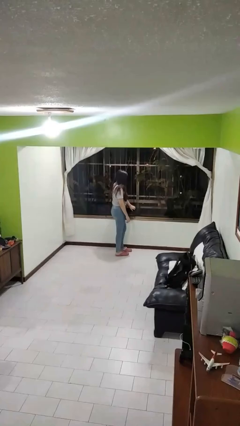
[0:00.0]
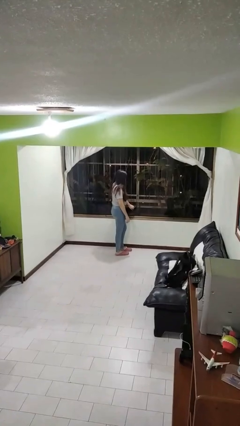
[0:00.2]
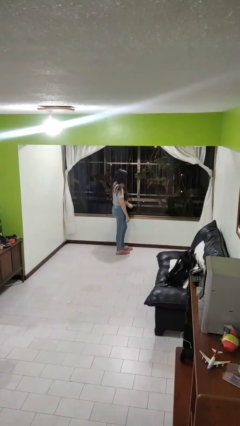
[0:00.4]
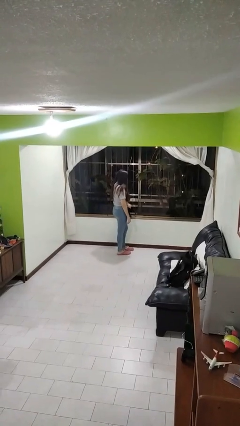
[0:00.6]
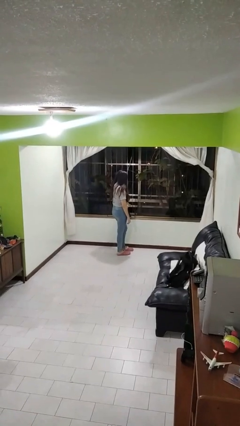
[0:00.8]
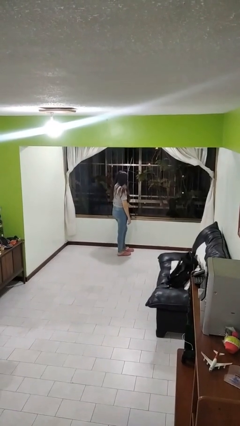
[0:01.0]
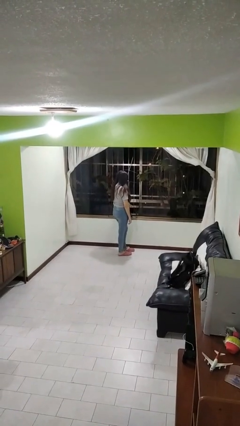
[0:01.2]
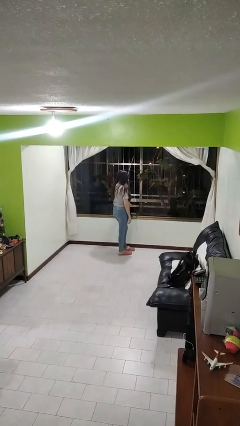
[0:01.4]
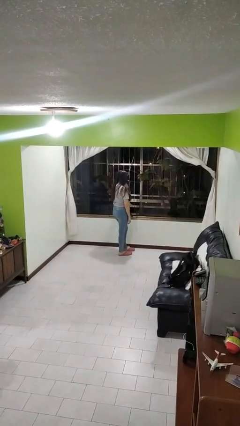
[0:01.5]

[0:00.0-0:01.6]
person opens home window

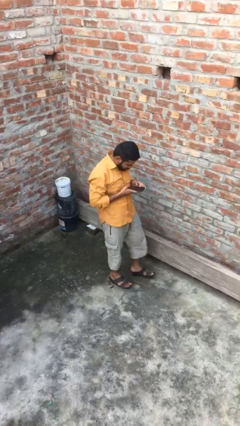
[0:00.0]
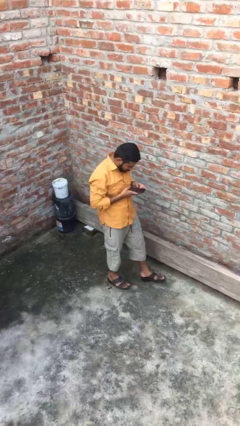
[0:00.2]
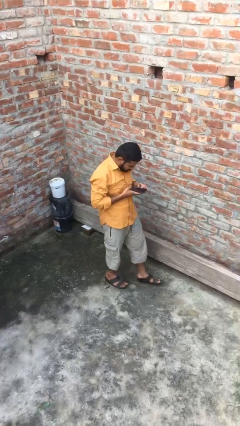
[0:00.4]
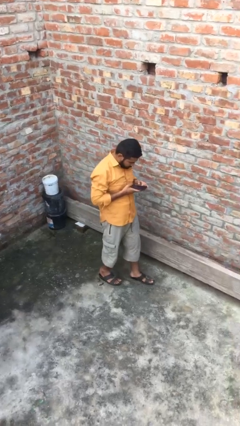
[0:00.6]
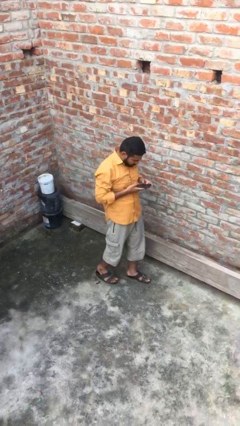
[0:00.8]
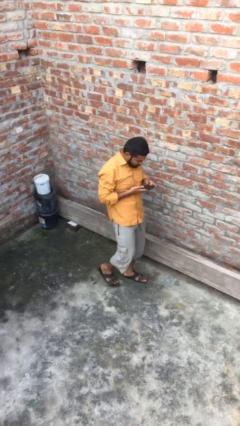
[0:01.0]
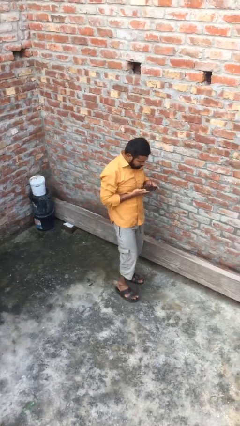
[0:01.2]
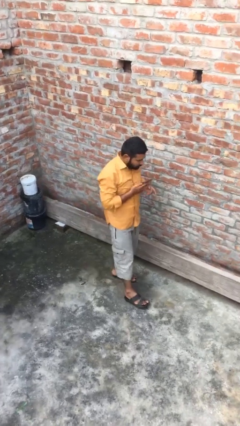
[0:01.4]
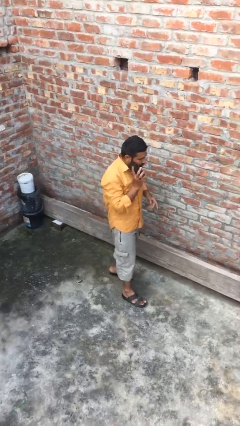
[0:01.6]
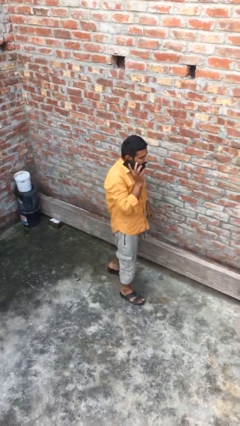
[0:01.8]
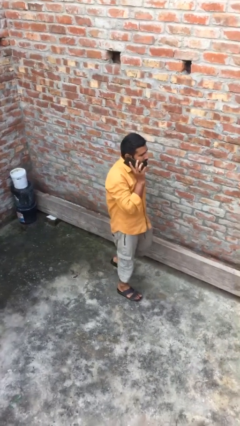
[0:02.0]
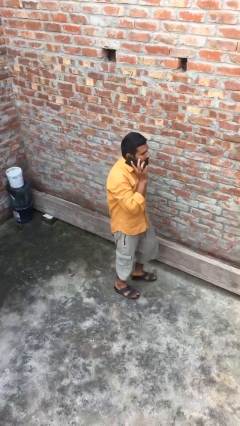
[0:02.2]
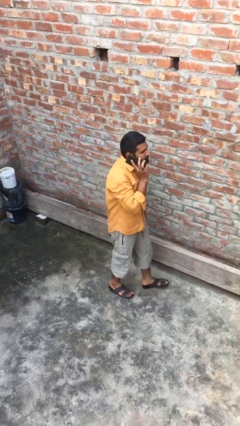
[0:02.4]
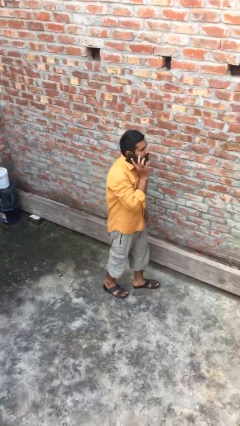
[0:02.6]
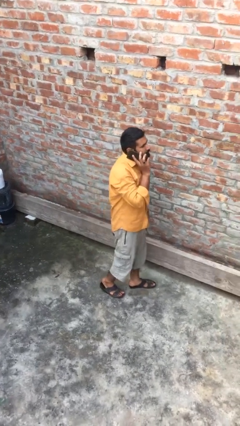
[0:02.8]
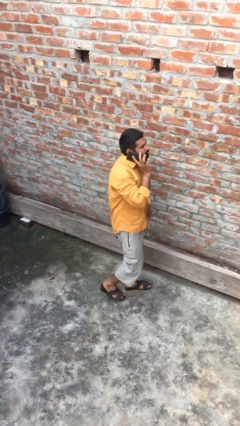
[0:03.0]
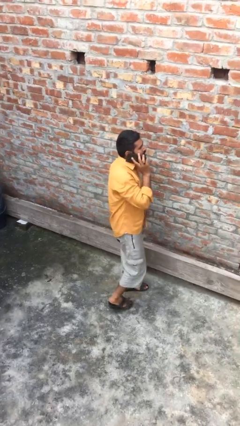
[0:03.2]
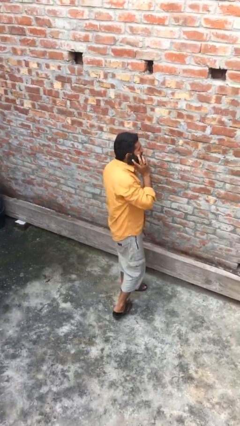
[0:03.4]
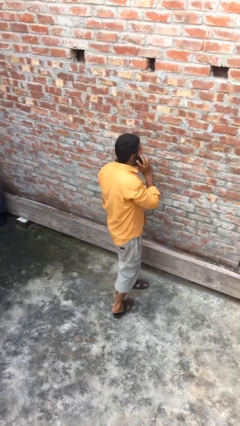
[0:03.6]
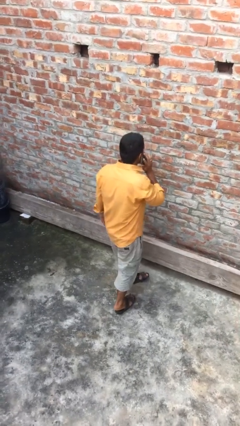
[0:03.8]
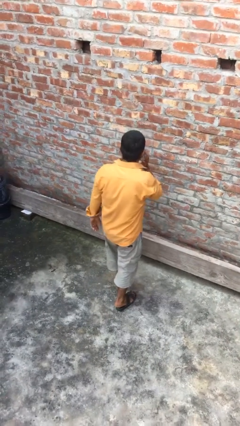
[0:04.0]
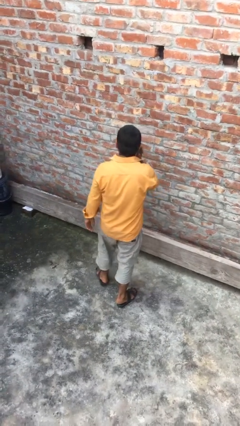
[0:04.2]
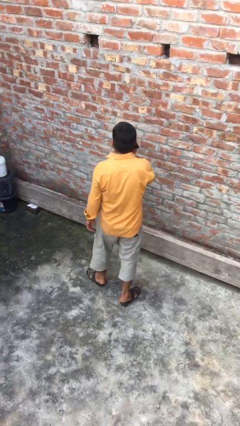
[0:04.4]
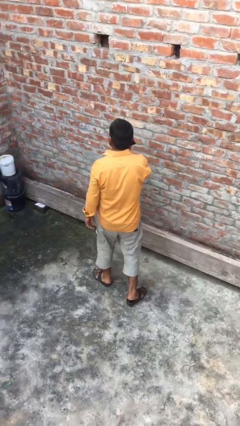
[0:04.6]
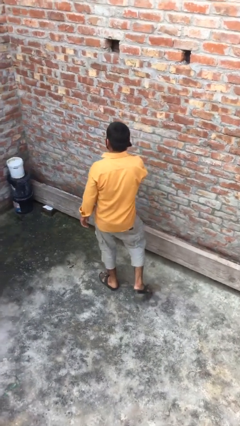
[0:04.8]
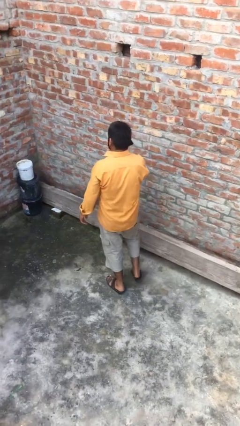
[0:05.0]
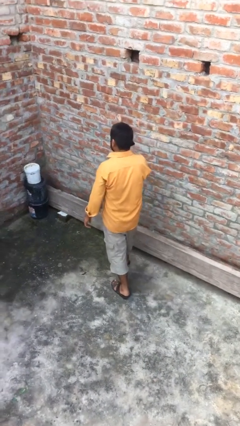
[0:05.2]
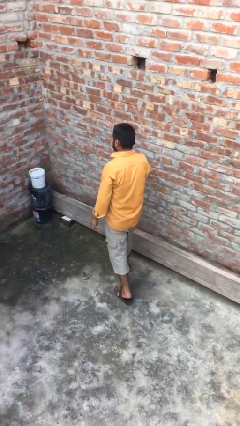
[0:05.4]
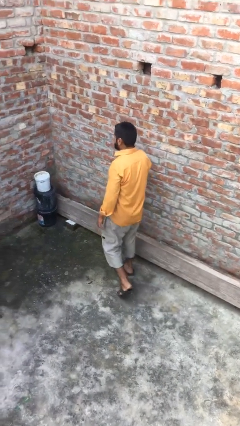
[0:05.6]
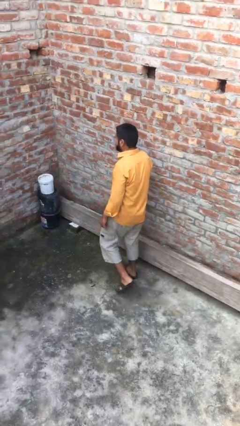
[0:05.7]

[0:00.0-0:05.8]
person talks on phone

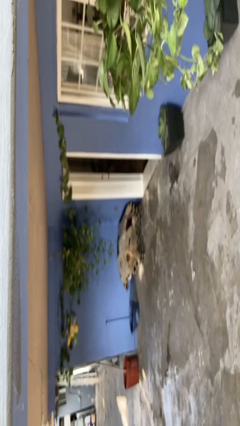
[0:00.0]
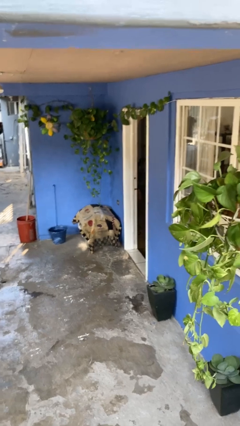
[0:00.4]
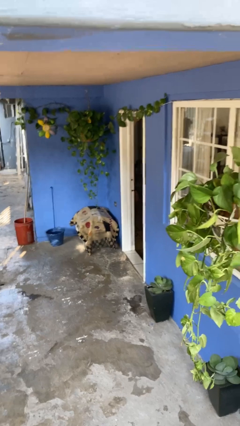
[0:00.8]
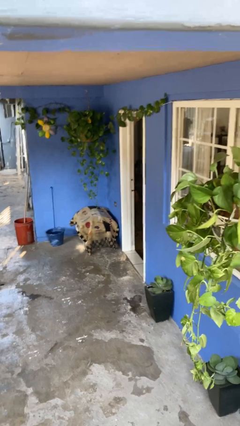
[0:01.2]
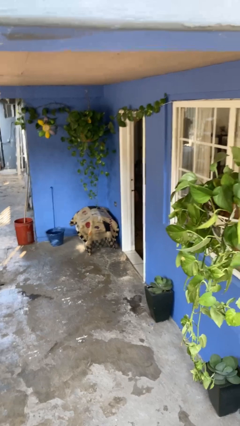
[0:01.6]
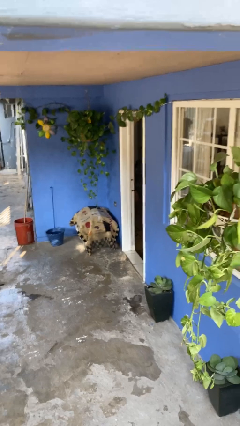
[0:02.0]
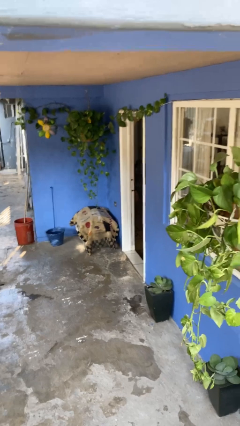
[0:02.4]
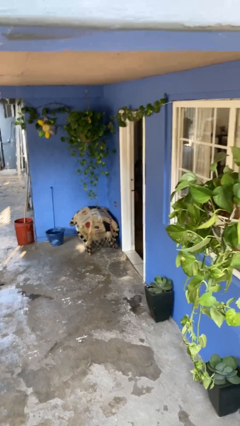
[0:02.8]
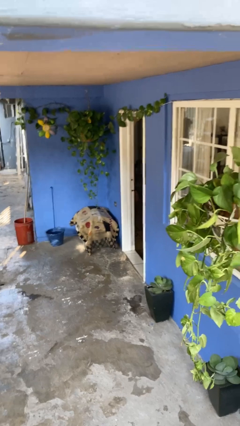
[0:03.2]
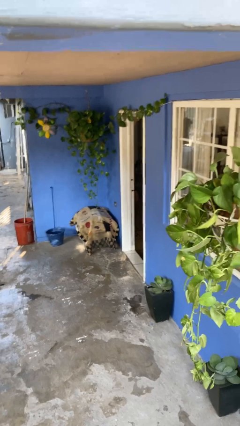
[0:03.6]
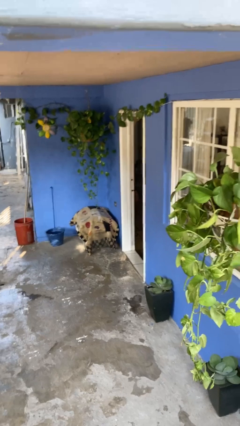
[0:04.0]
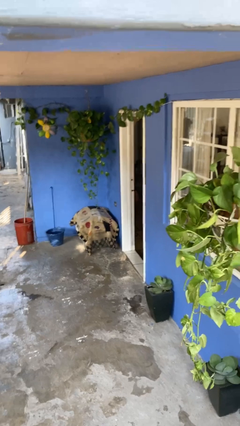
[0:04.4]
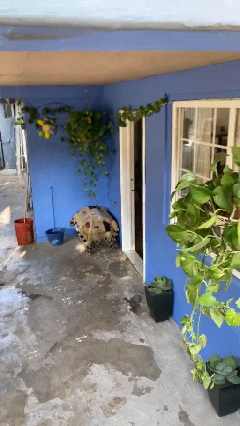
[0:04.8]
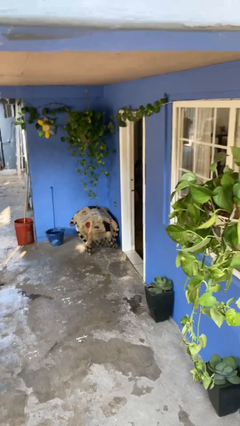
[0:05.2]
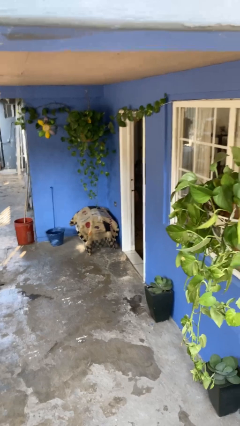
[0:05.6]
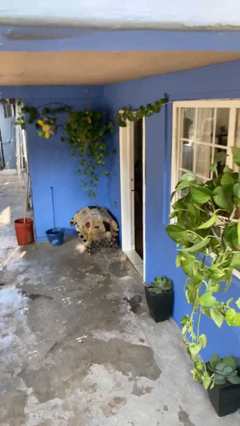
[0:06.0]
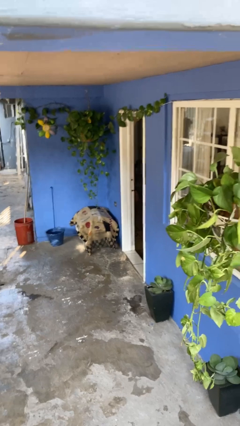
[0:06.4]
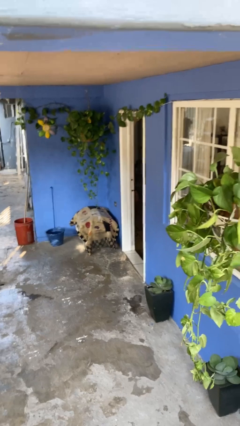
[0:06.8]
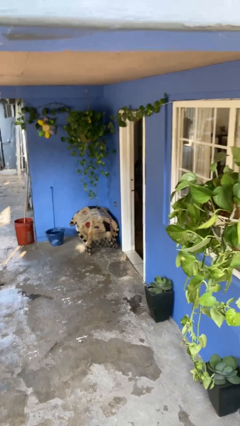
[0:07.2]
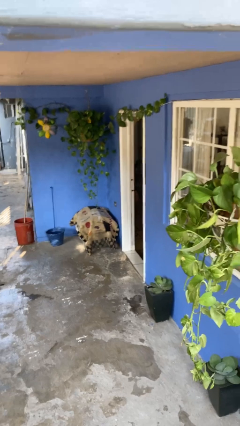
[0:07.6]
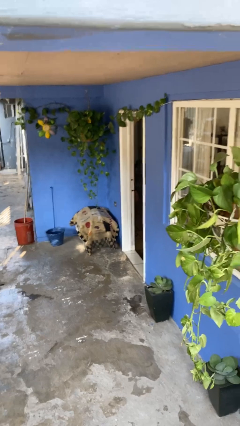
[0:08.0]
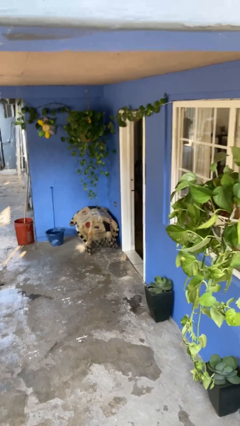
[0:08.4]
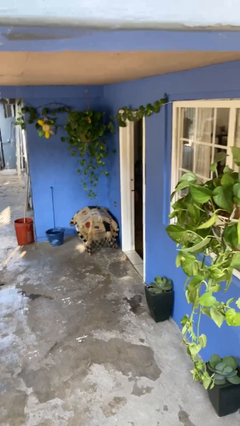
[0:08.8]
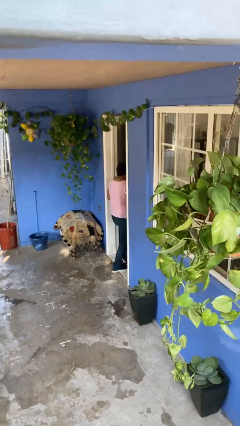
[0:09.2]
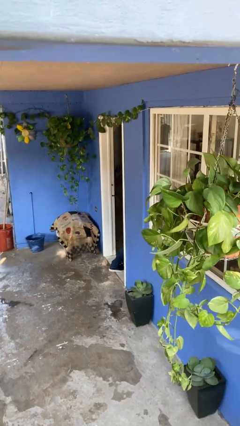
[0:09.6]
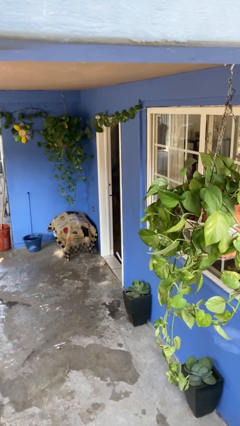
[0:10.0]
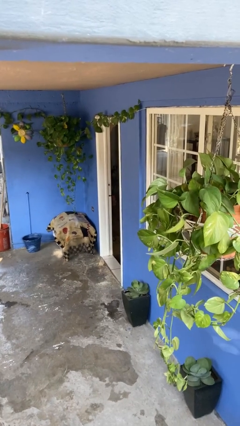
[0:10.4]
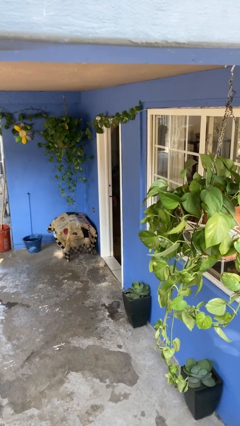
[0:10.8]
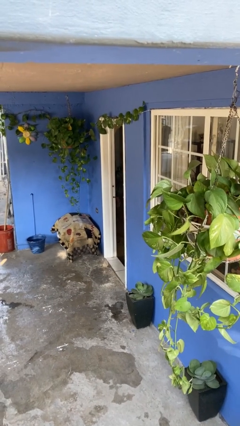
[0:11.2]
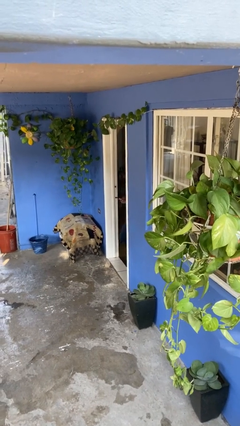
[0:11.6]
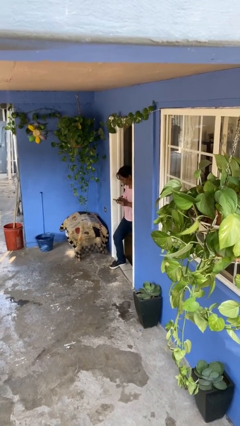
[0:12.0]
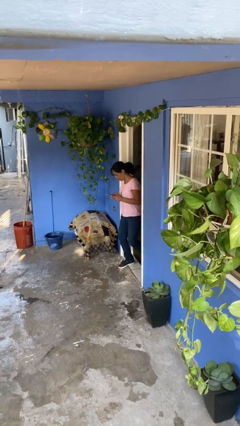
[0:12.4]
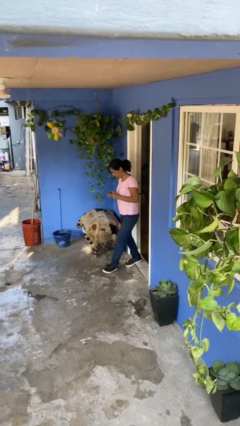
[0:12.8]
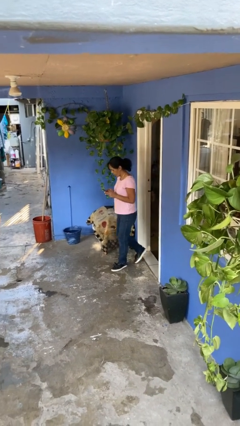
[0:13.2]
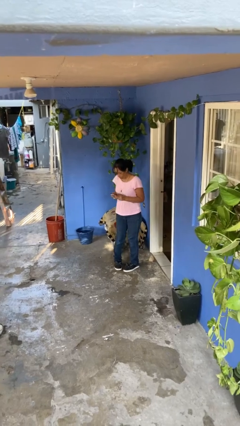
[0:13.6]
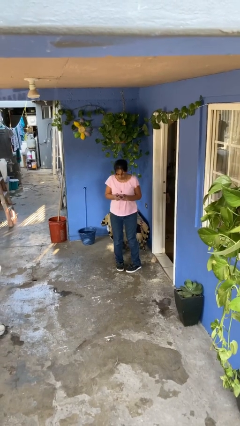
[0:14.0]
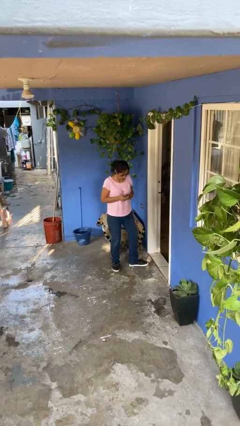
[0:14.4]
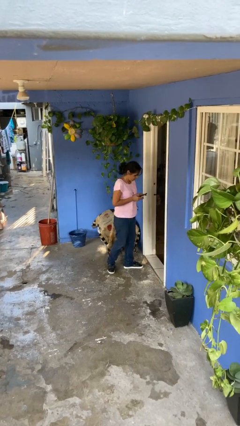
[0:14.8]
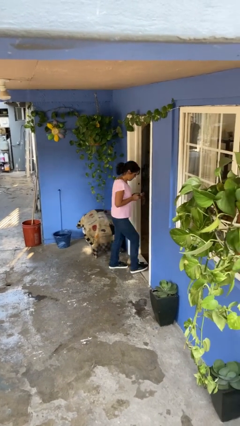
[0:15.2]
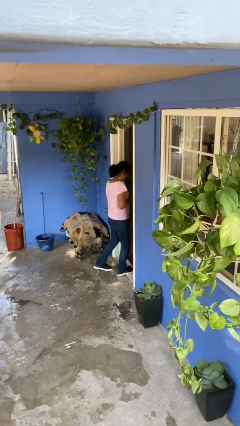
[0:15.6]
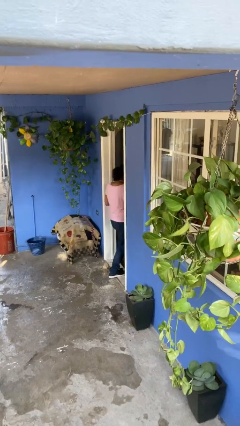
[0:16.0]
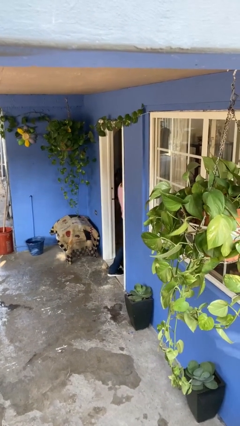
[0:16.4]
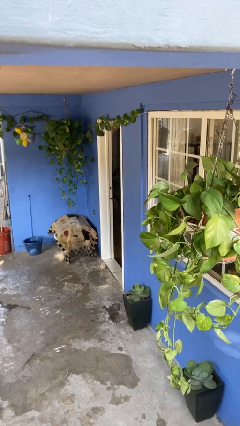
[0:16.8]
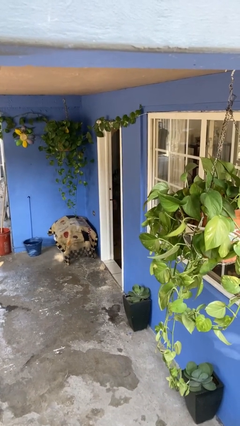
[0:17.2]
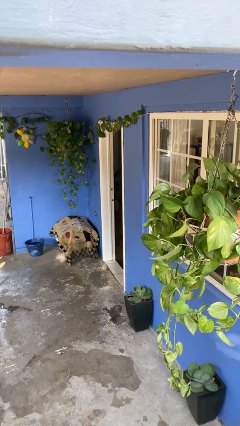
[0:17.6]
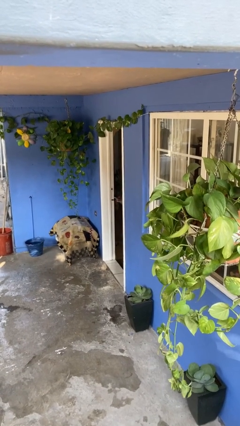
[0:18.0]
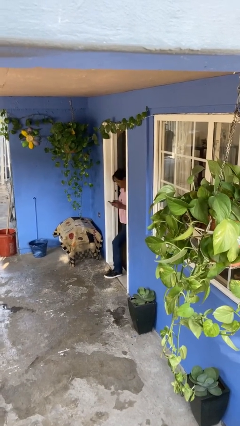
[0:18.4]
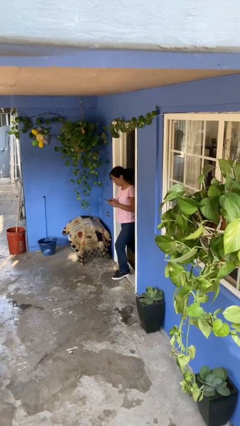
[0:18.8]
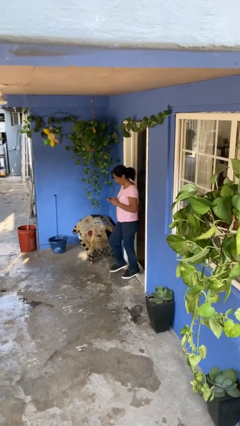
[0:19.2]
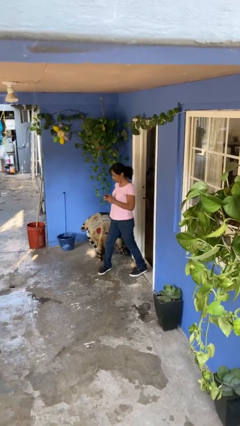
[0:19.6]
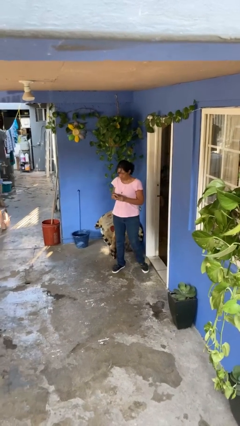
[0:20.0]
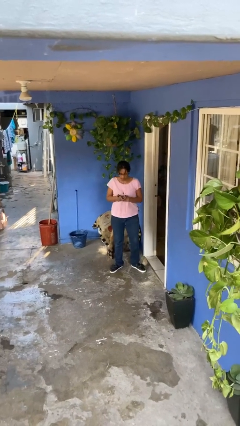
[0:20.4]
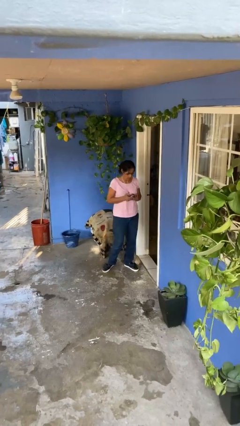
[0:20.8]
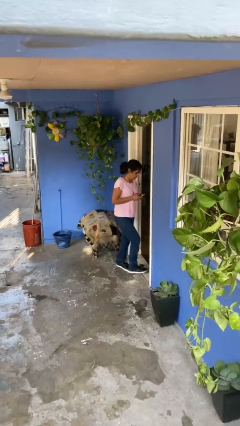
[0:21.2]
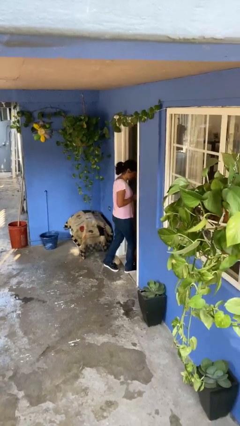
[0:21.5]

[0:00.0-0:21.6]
person texts on phone
